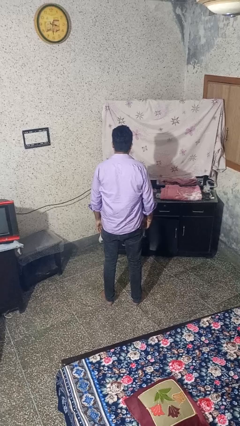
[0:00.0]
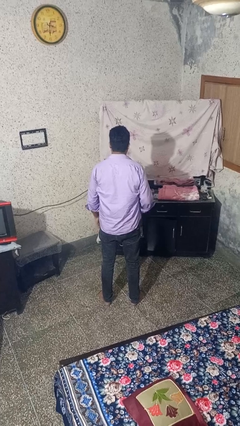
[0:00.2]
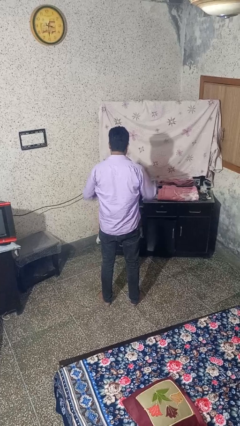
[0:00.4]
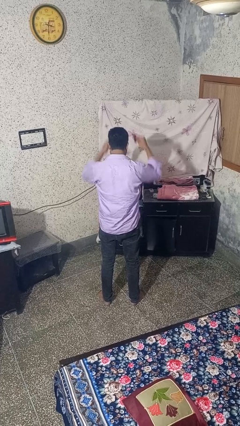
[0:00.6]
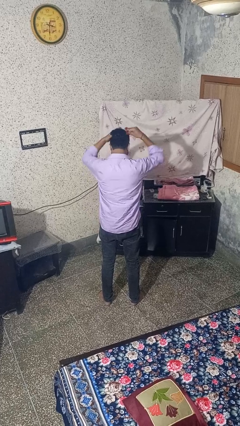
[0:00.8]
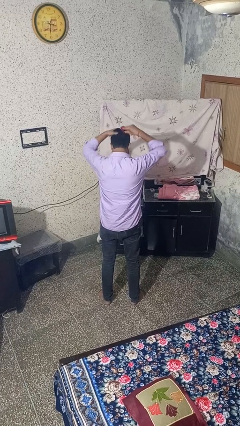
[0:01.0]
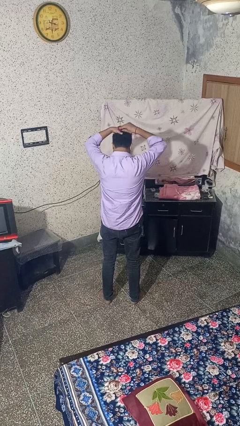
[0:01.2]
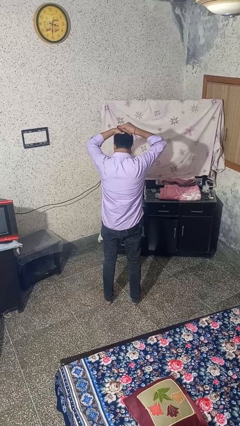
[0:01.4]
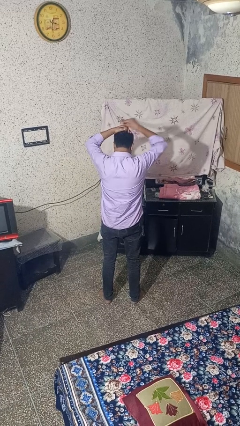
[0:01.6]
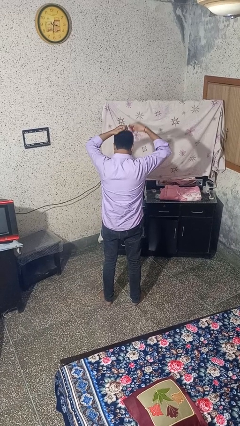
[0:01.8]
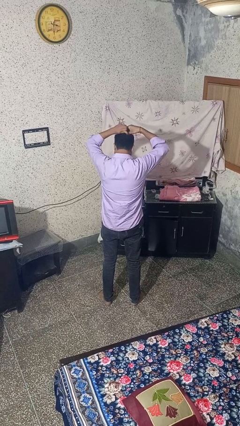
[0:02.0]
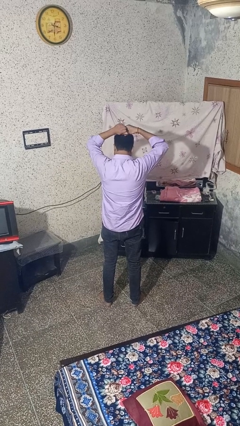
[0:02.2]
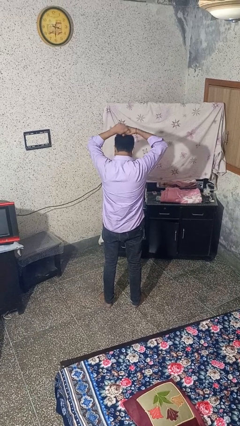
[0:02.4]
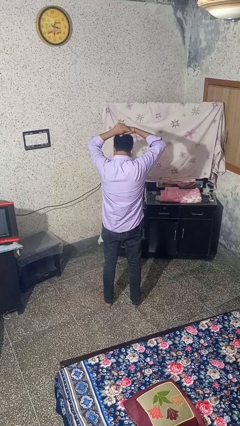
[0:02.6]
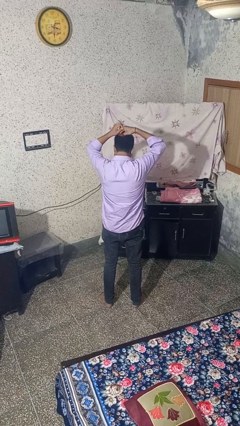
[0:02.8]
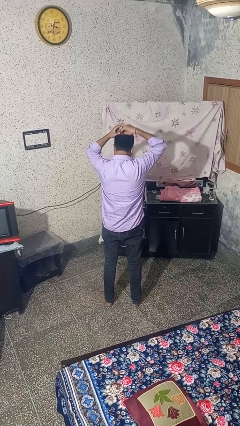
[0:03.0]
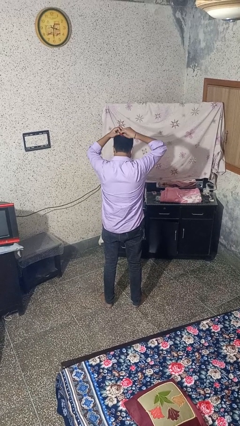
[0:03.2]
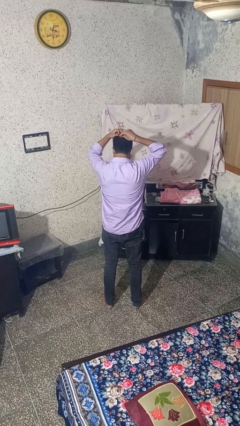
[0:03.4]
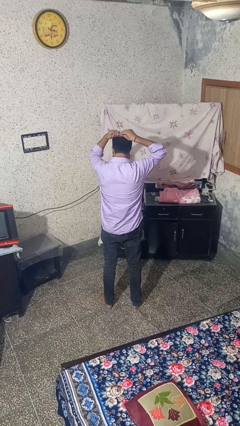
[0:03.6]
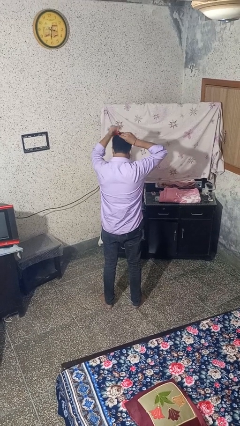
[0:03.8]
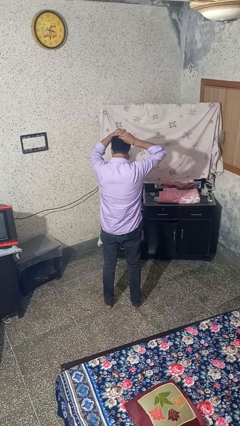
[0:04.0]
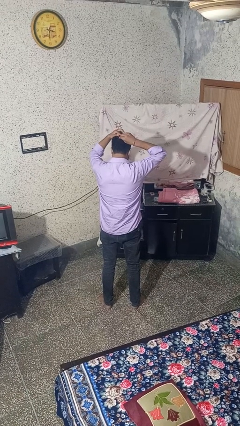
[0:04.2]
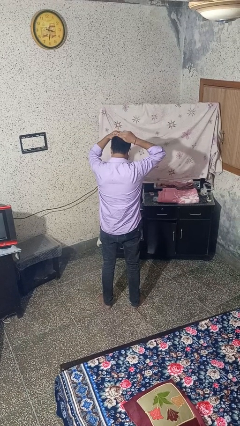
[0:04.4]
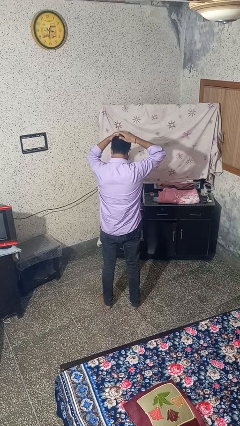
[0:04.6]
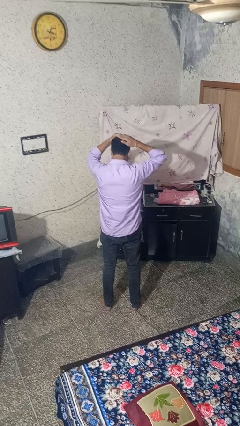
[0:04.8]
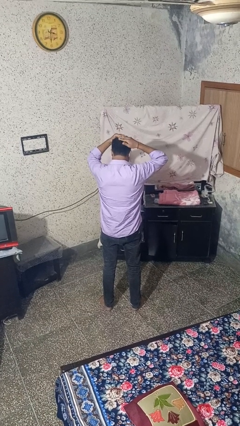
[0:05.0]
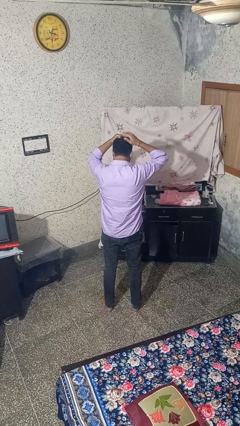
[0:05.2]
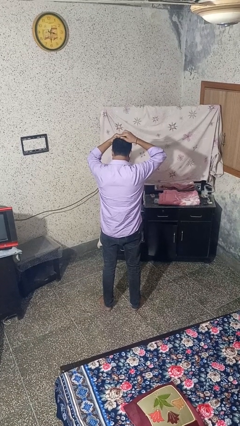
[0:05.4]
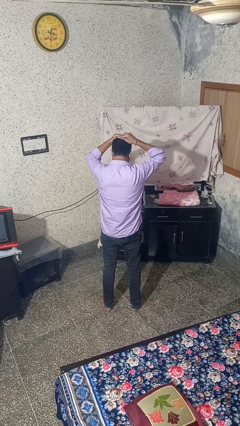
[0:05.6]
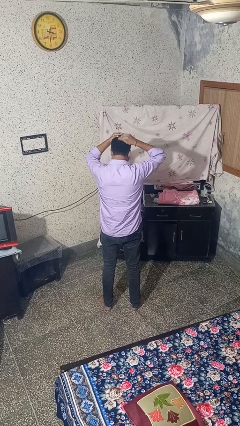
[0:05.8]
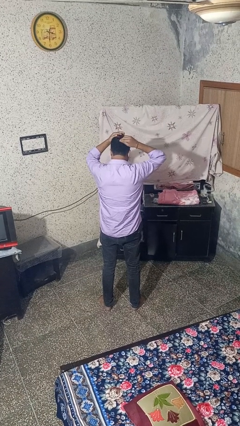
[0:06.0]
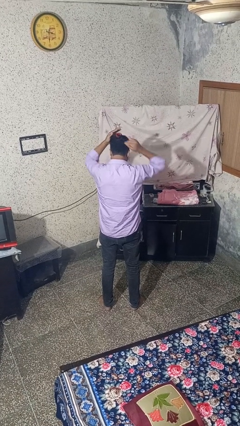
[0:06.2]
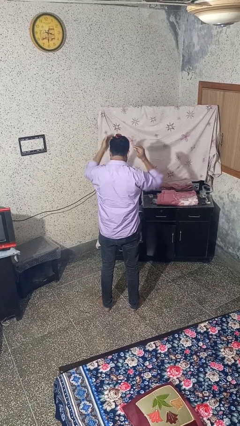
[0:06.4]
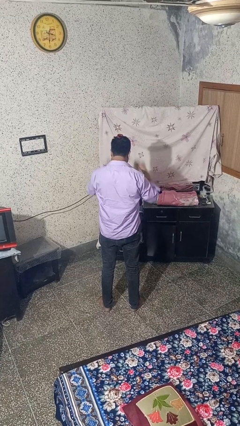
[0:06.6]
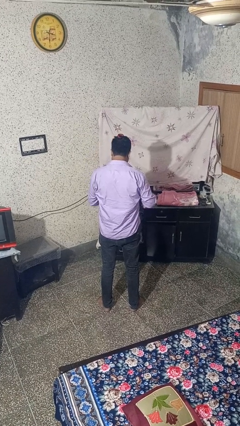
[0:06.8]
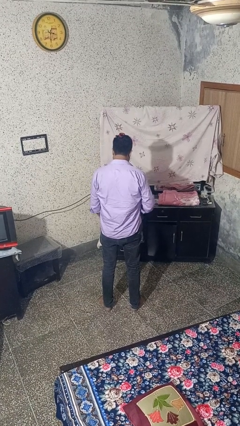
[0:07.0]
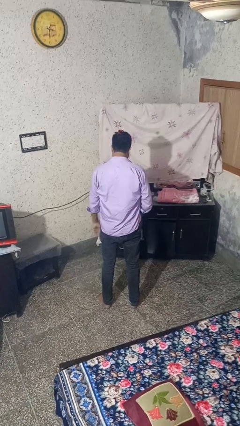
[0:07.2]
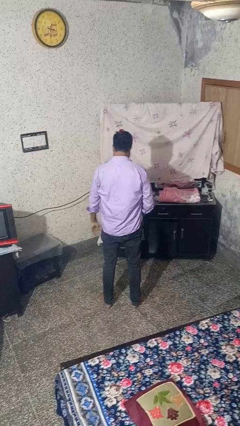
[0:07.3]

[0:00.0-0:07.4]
person puts hair in ponytail

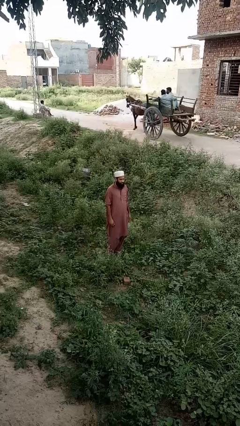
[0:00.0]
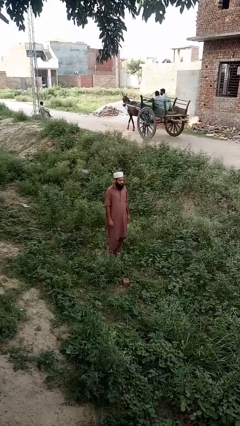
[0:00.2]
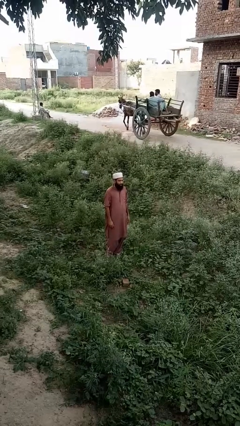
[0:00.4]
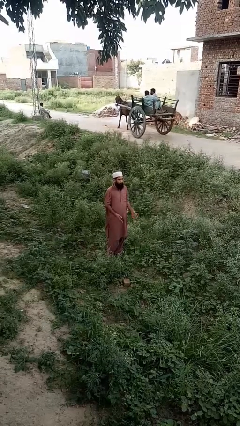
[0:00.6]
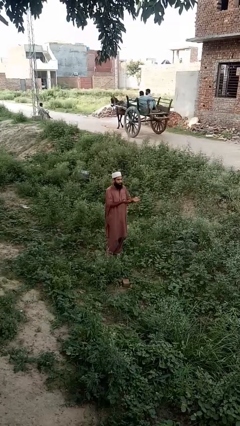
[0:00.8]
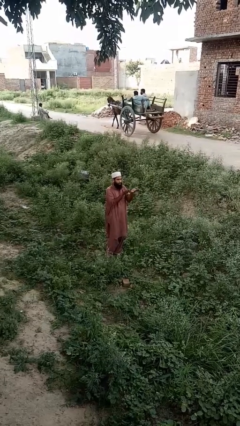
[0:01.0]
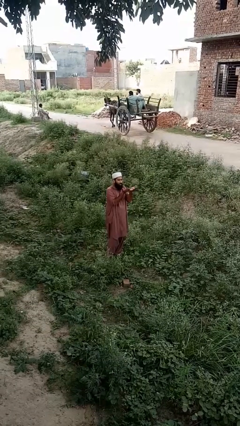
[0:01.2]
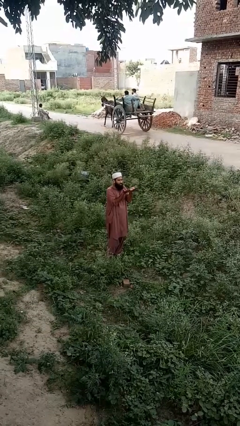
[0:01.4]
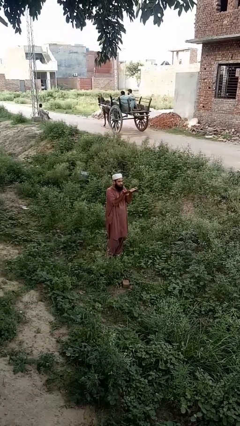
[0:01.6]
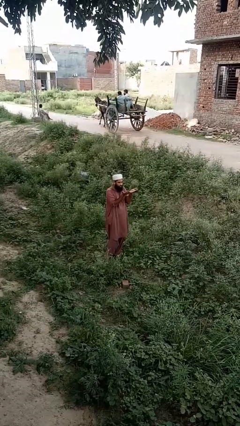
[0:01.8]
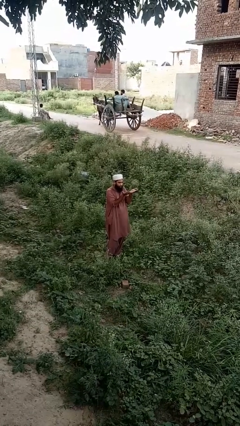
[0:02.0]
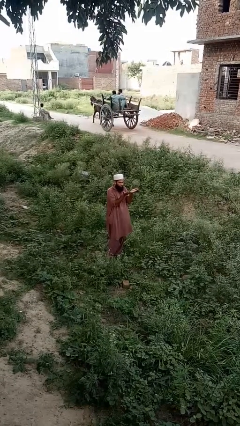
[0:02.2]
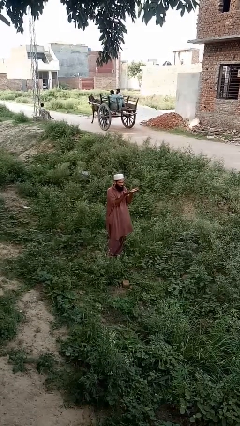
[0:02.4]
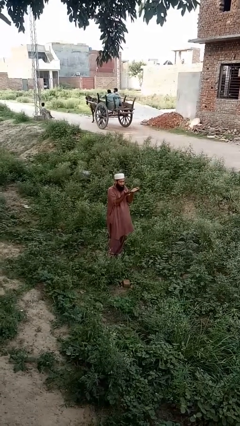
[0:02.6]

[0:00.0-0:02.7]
person prays

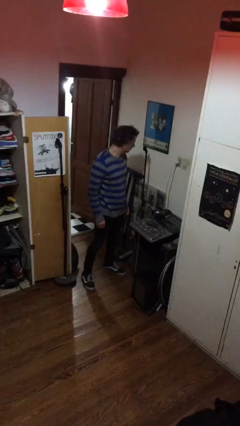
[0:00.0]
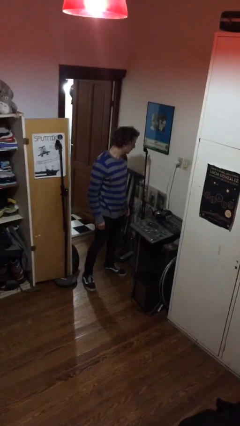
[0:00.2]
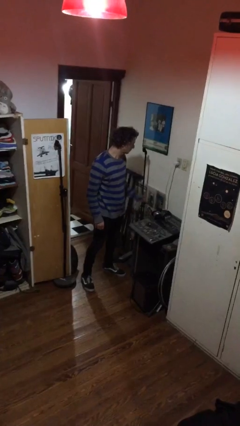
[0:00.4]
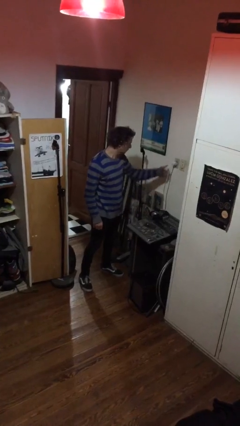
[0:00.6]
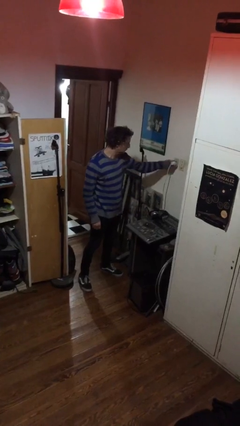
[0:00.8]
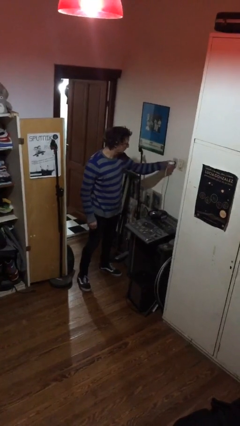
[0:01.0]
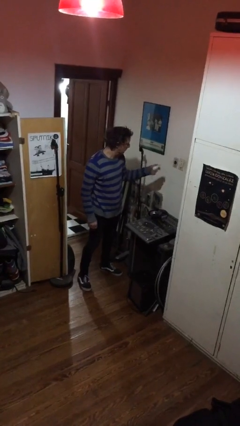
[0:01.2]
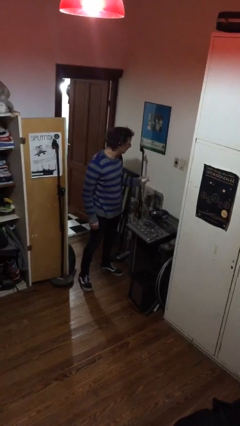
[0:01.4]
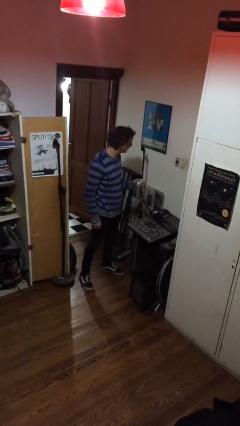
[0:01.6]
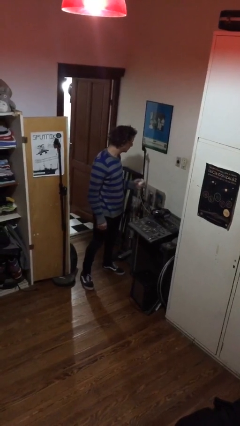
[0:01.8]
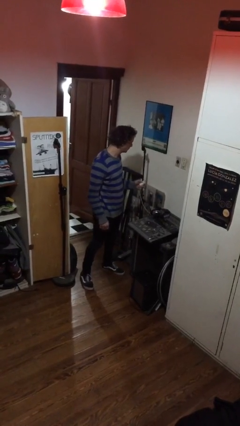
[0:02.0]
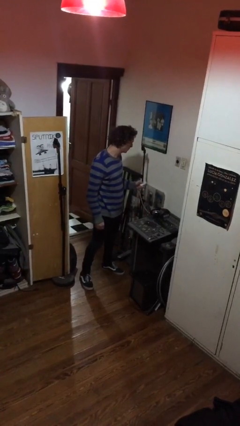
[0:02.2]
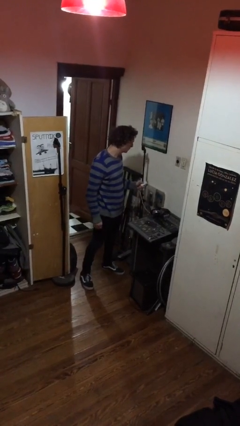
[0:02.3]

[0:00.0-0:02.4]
person unplugs from electrical socket

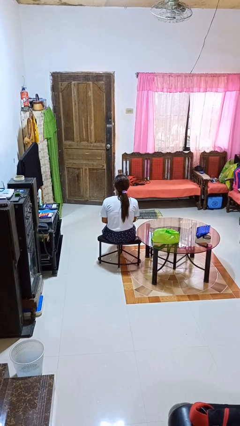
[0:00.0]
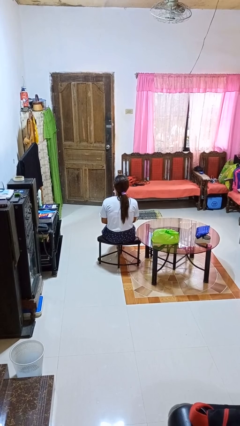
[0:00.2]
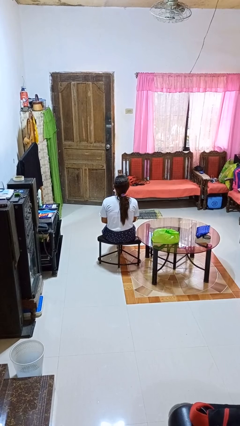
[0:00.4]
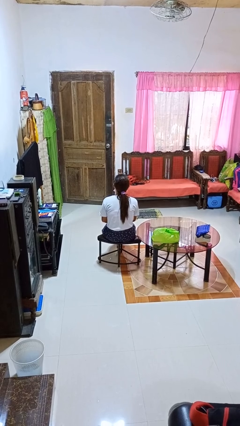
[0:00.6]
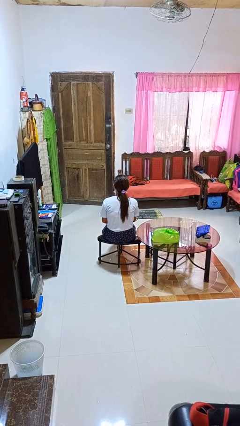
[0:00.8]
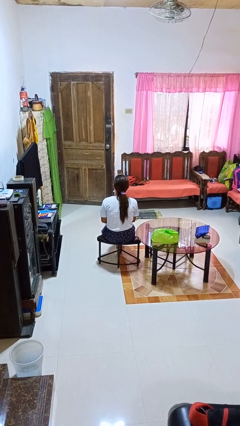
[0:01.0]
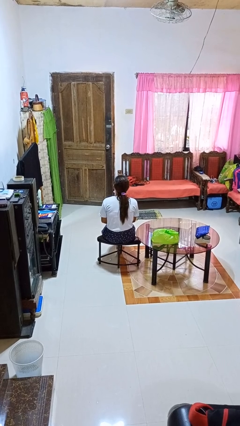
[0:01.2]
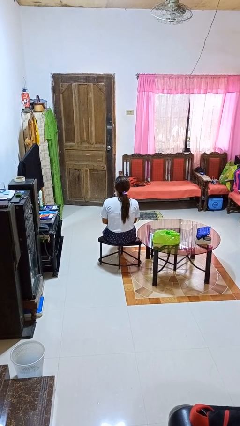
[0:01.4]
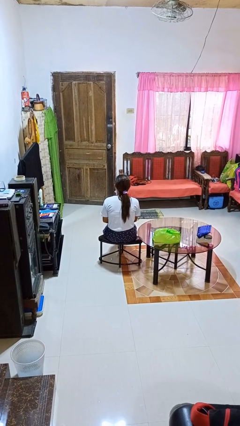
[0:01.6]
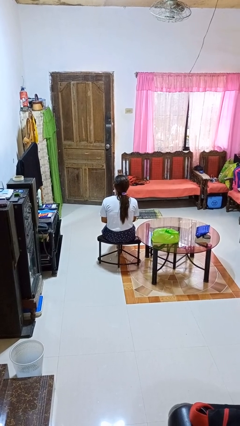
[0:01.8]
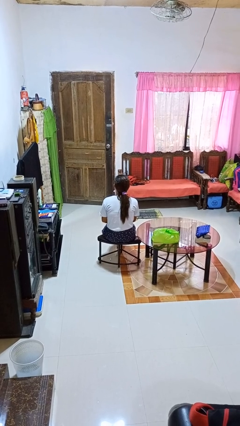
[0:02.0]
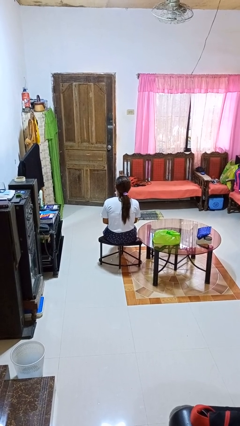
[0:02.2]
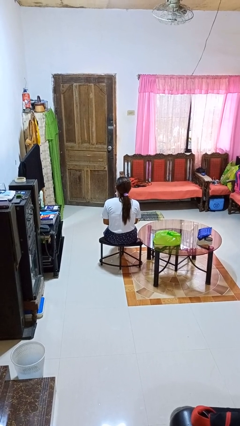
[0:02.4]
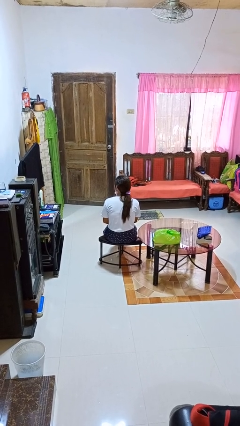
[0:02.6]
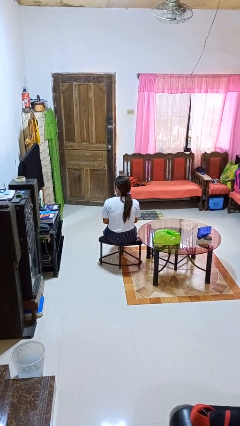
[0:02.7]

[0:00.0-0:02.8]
person nods head

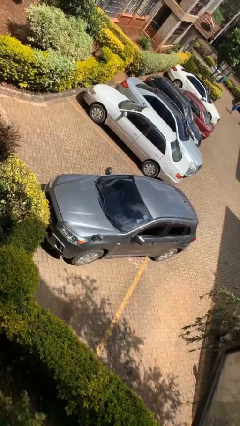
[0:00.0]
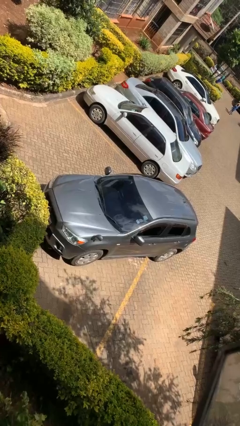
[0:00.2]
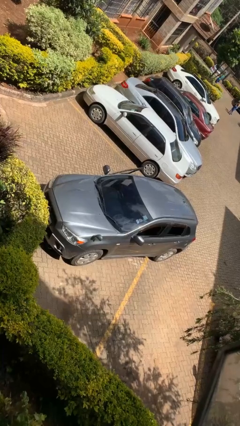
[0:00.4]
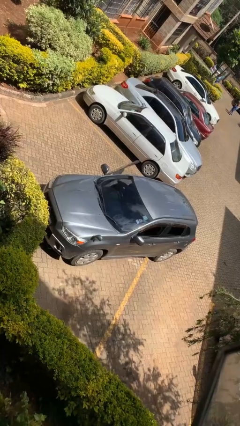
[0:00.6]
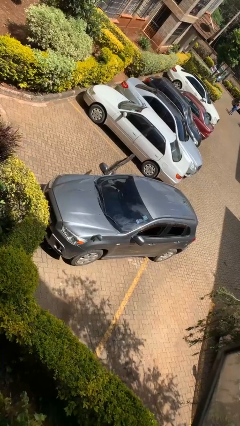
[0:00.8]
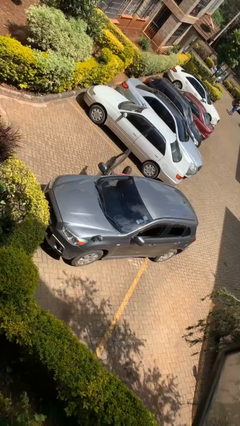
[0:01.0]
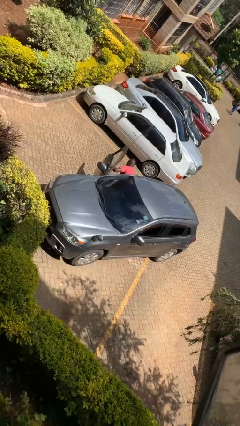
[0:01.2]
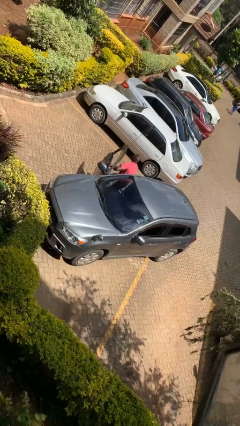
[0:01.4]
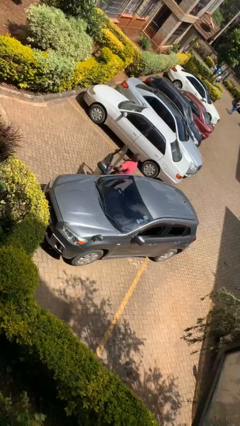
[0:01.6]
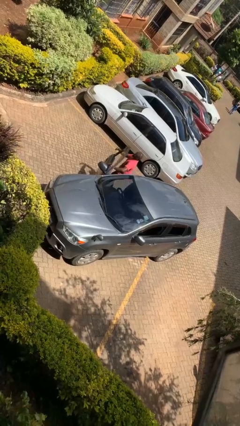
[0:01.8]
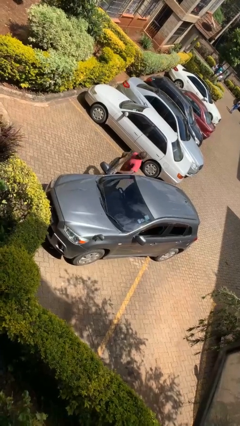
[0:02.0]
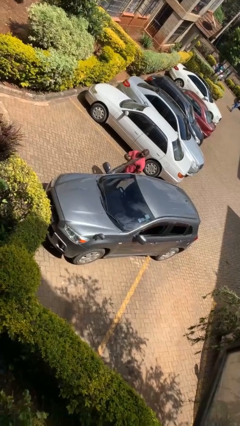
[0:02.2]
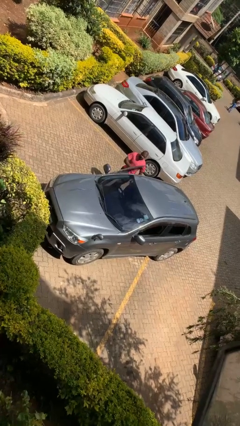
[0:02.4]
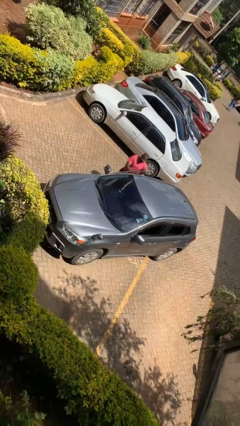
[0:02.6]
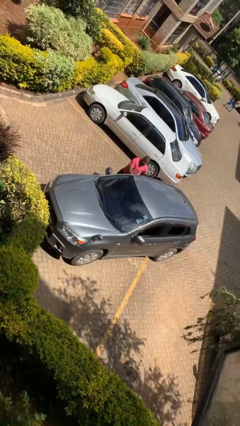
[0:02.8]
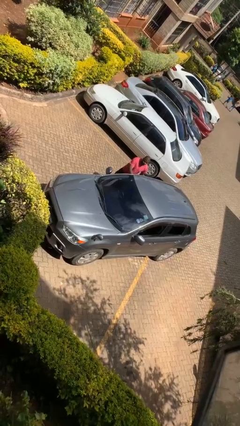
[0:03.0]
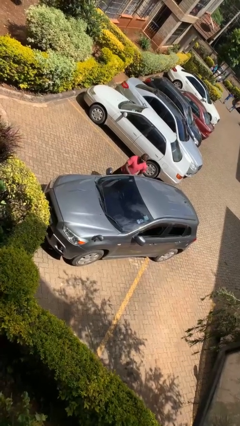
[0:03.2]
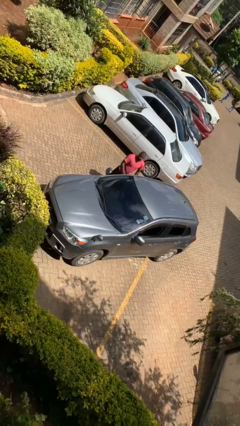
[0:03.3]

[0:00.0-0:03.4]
car drops off person
